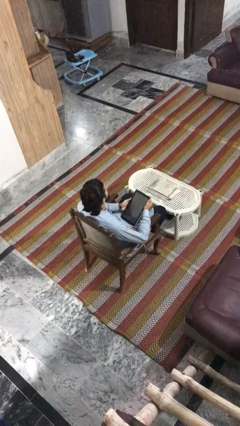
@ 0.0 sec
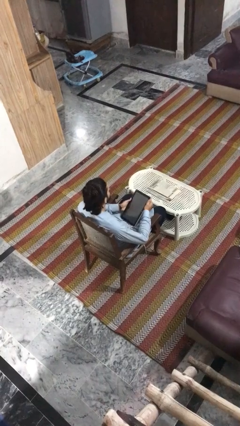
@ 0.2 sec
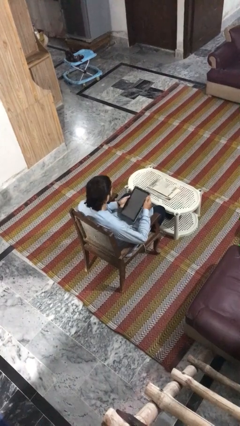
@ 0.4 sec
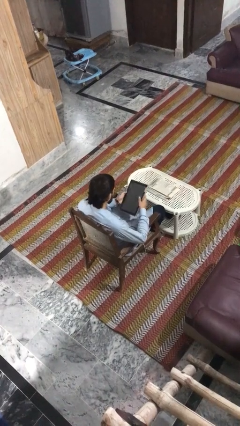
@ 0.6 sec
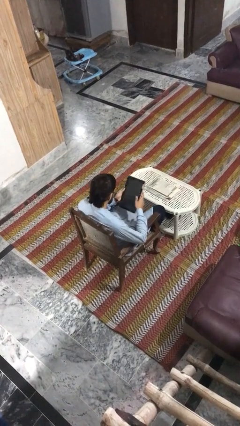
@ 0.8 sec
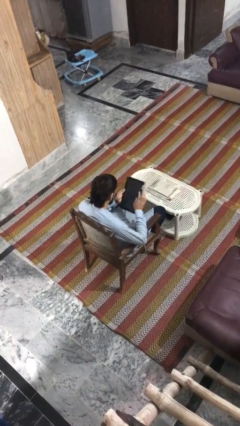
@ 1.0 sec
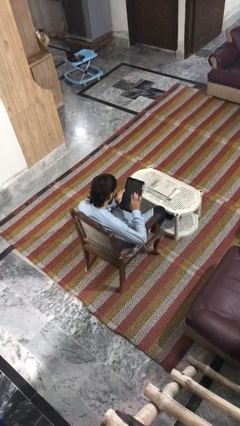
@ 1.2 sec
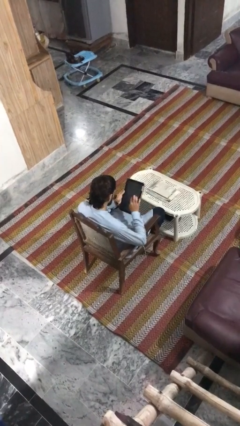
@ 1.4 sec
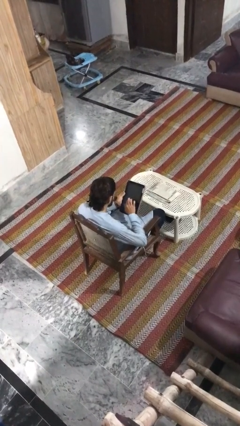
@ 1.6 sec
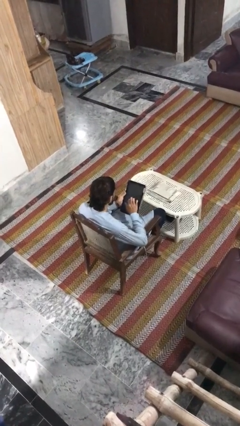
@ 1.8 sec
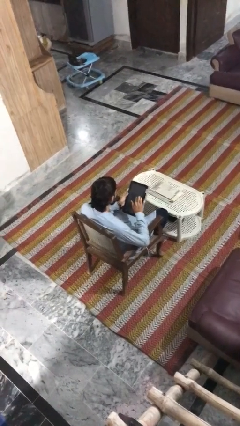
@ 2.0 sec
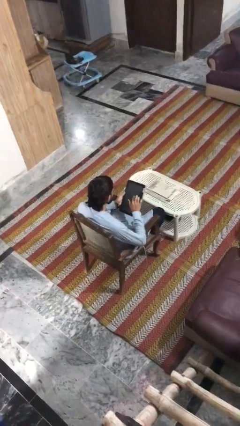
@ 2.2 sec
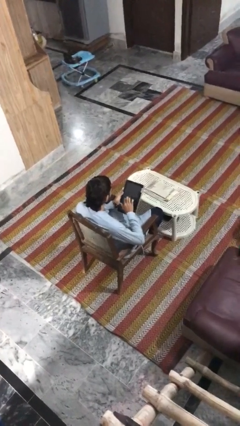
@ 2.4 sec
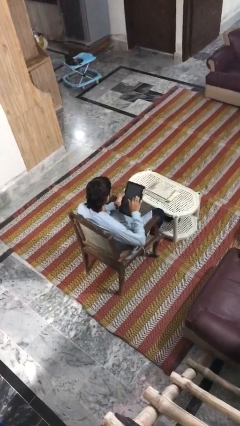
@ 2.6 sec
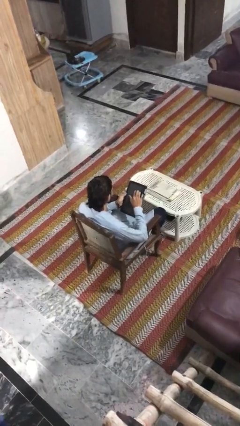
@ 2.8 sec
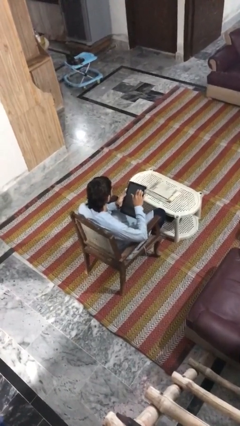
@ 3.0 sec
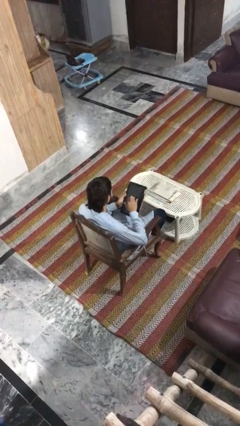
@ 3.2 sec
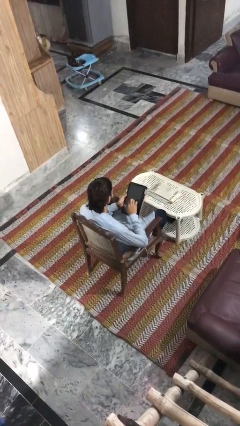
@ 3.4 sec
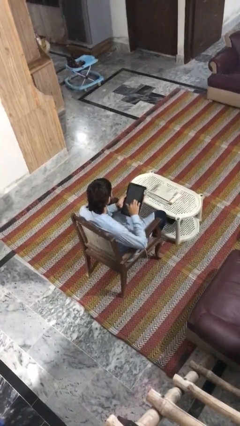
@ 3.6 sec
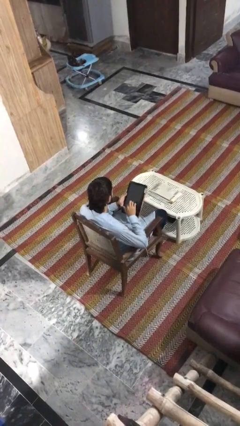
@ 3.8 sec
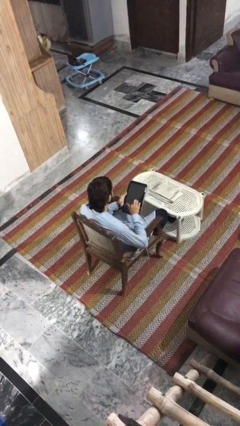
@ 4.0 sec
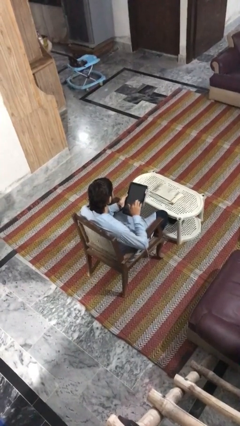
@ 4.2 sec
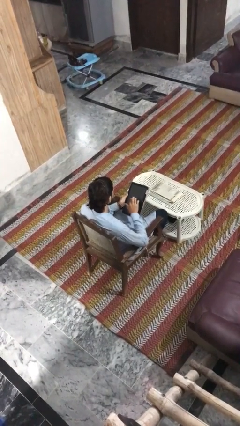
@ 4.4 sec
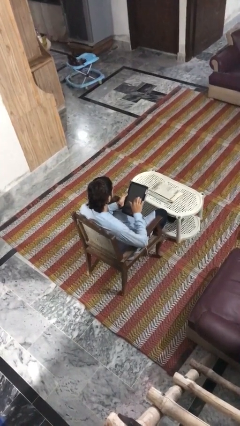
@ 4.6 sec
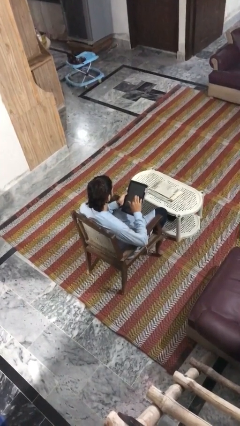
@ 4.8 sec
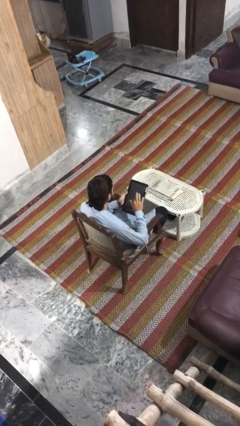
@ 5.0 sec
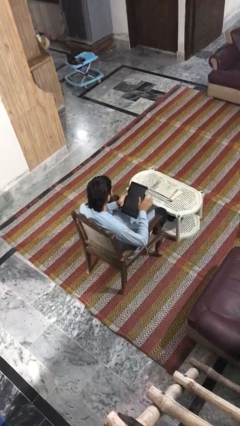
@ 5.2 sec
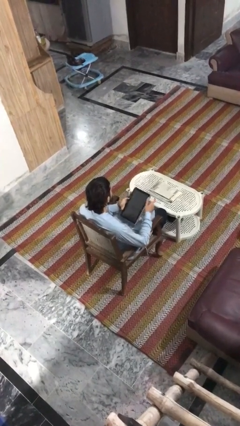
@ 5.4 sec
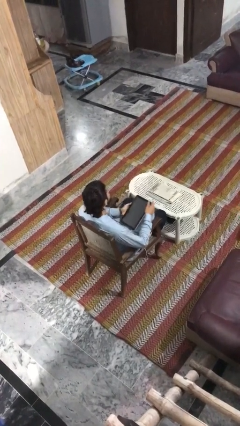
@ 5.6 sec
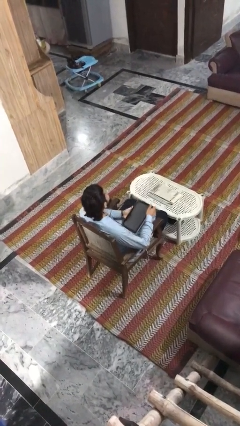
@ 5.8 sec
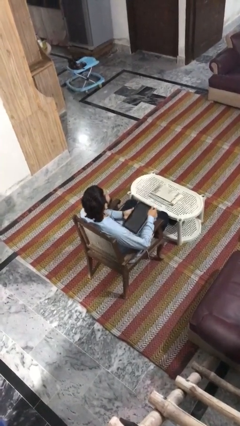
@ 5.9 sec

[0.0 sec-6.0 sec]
person interacts with tablet

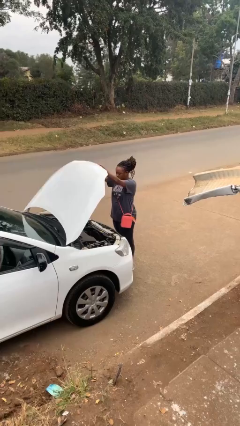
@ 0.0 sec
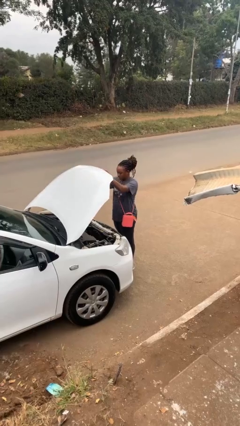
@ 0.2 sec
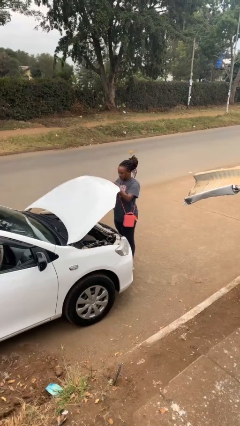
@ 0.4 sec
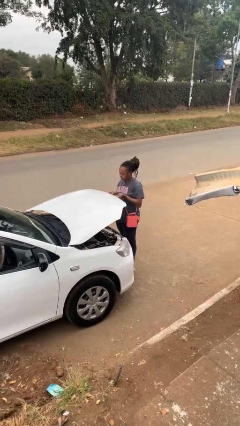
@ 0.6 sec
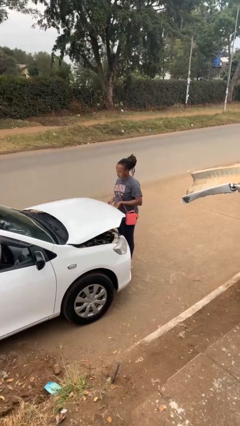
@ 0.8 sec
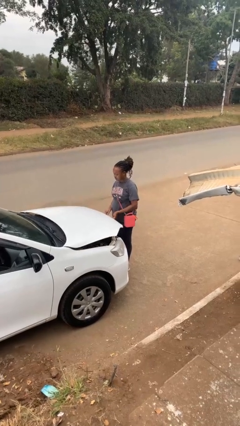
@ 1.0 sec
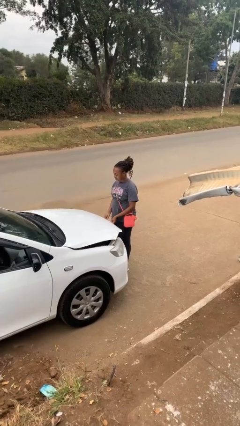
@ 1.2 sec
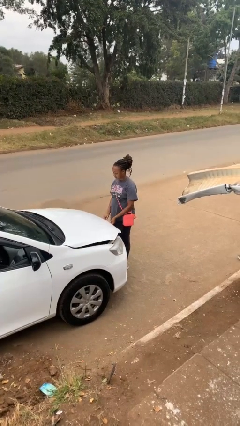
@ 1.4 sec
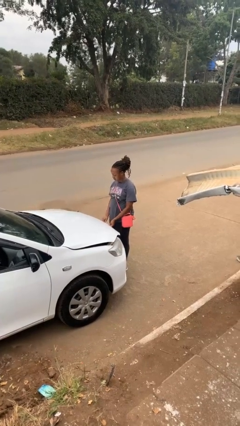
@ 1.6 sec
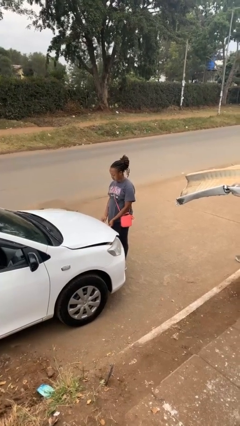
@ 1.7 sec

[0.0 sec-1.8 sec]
person closes car hood

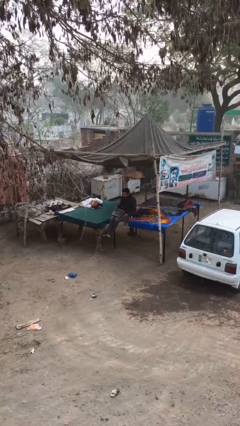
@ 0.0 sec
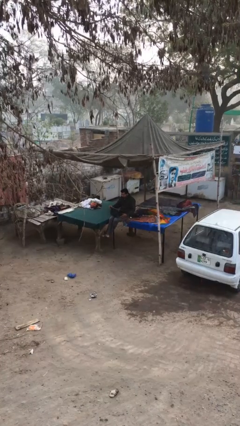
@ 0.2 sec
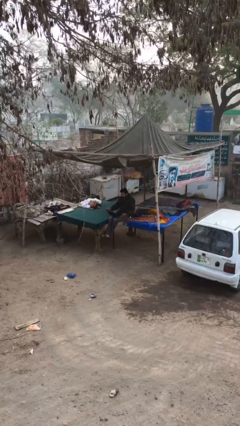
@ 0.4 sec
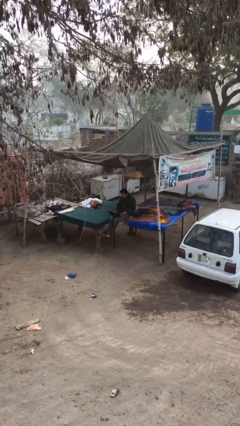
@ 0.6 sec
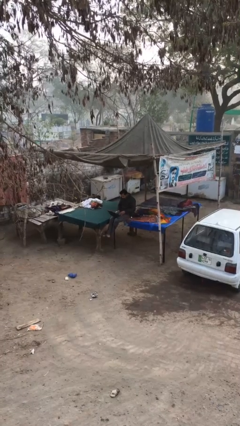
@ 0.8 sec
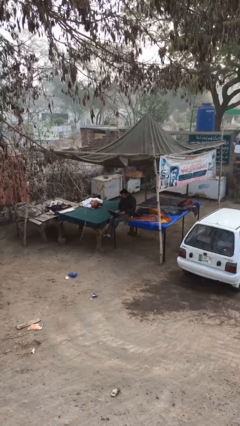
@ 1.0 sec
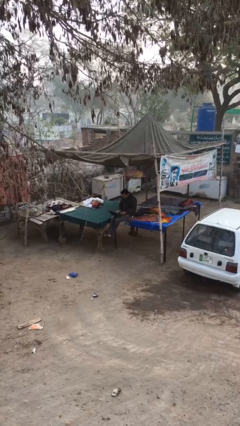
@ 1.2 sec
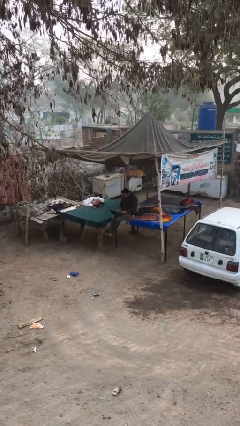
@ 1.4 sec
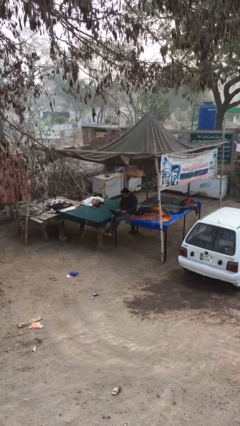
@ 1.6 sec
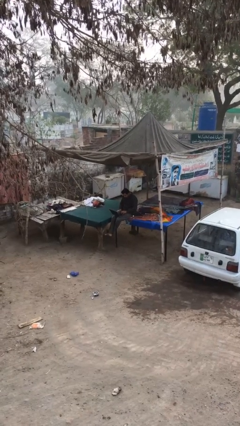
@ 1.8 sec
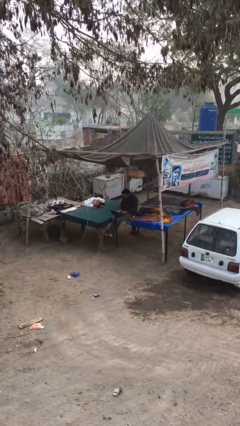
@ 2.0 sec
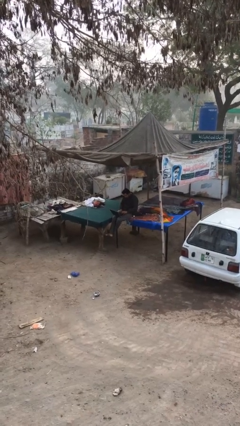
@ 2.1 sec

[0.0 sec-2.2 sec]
person interacts with laptop

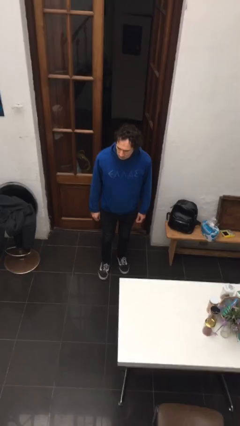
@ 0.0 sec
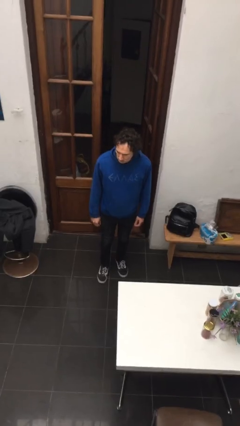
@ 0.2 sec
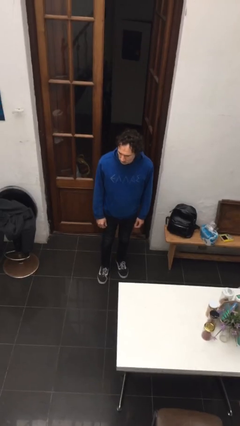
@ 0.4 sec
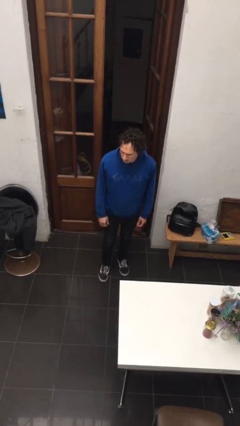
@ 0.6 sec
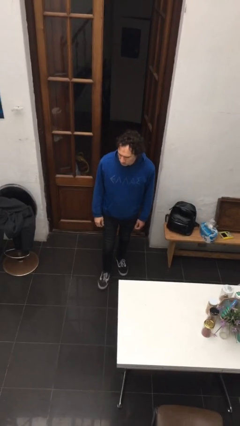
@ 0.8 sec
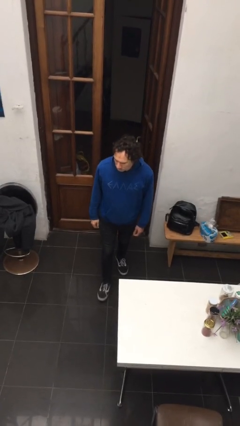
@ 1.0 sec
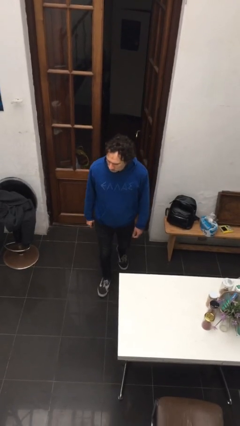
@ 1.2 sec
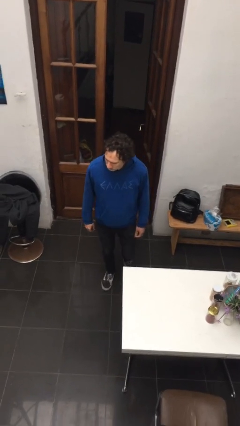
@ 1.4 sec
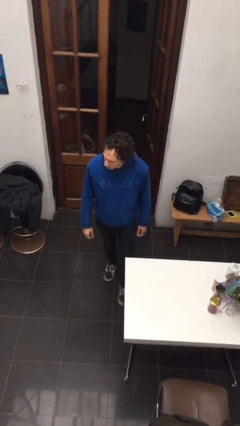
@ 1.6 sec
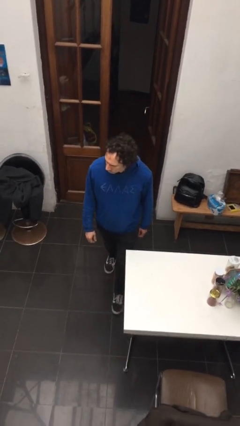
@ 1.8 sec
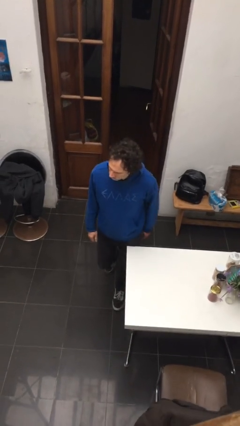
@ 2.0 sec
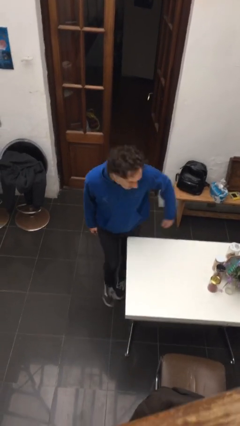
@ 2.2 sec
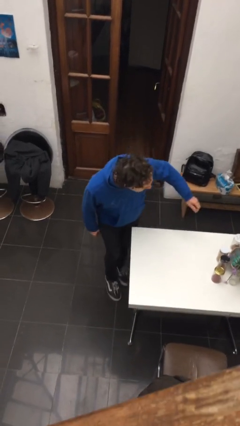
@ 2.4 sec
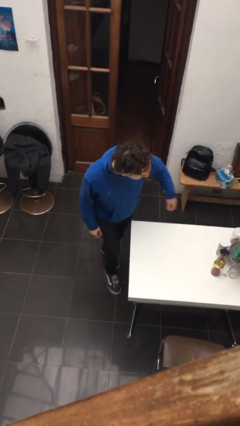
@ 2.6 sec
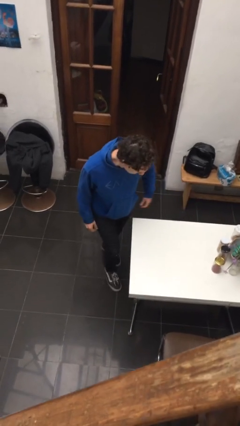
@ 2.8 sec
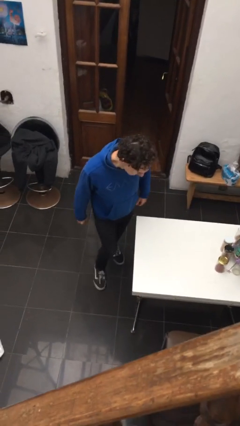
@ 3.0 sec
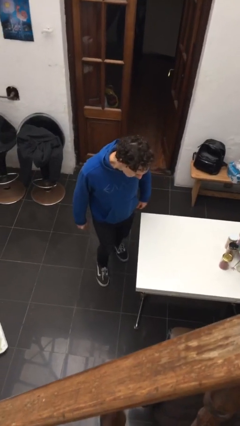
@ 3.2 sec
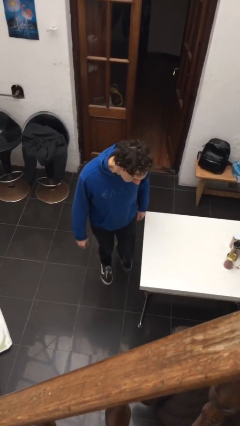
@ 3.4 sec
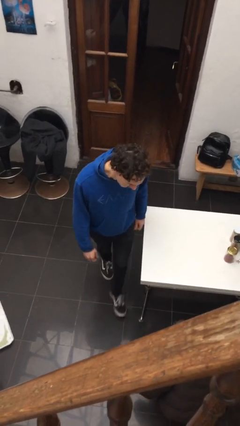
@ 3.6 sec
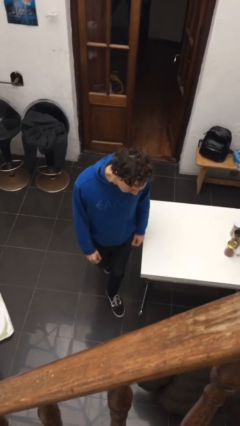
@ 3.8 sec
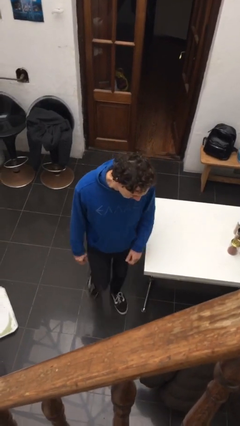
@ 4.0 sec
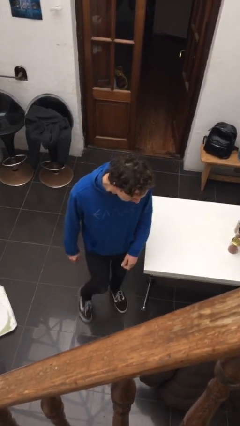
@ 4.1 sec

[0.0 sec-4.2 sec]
person bumps into table

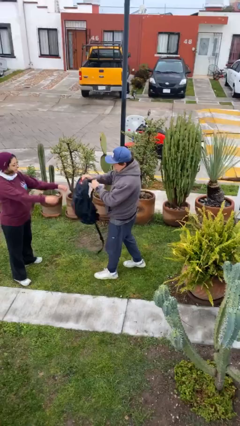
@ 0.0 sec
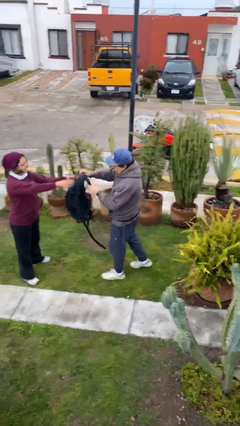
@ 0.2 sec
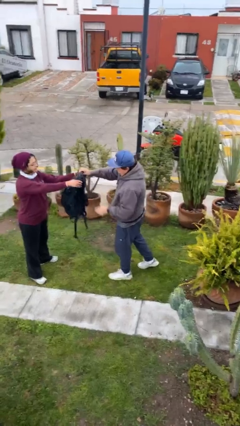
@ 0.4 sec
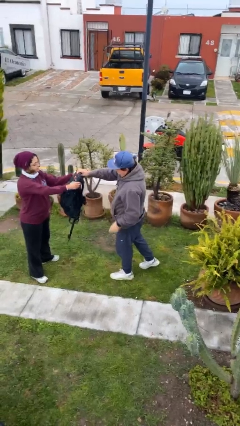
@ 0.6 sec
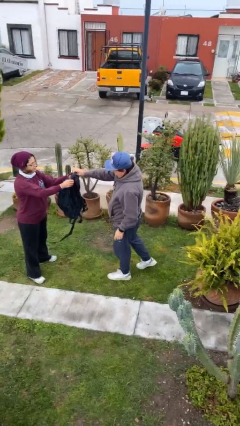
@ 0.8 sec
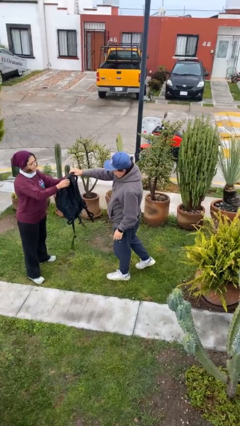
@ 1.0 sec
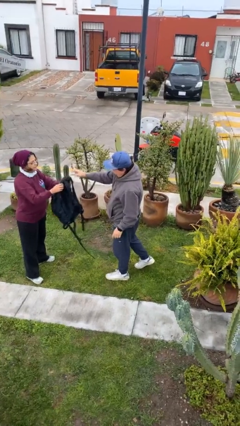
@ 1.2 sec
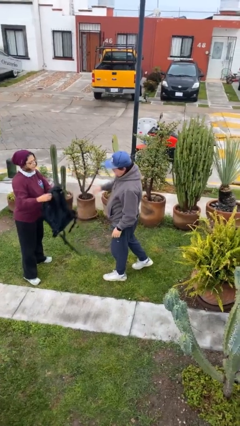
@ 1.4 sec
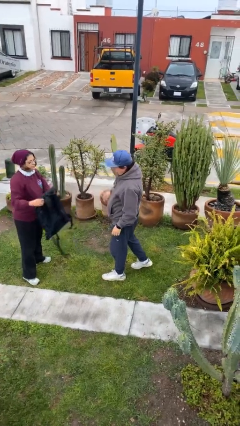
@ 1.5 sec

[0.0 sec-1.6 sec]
person transfers object to person

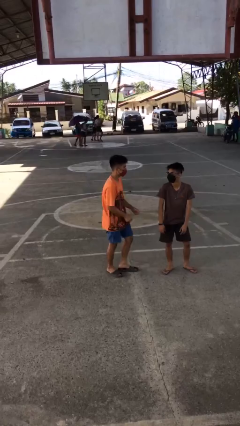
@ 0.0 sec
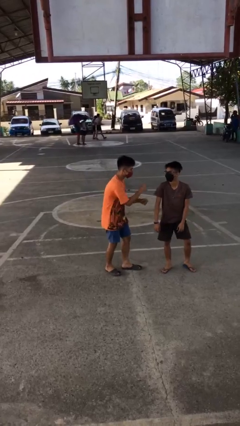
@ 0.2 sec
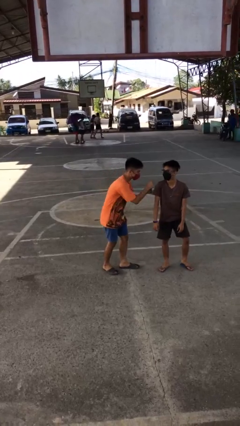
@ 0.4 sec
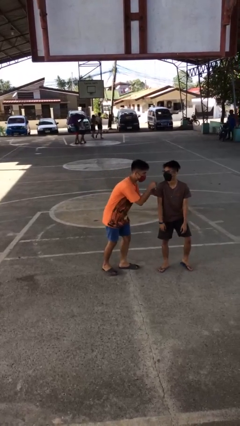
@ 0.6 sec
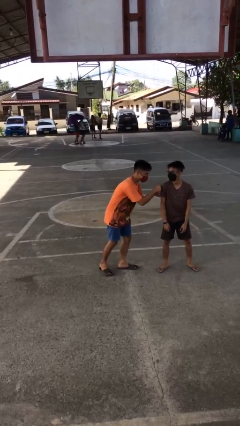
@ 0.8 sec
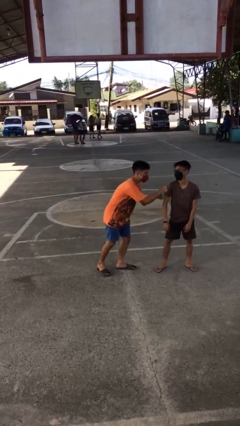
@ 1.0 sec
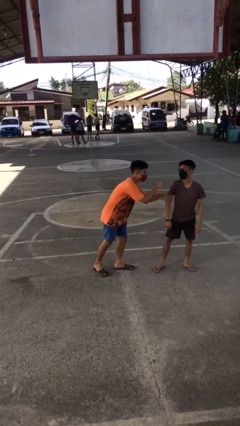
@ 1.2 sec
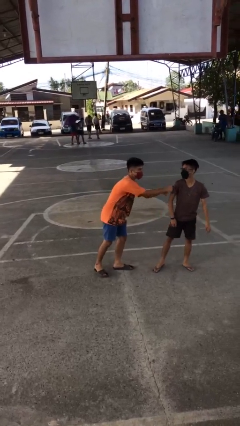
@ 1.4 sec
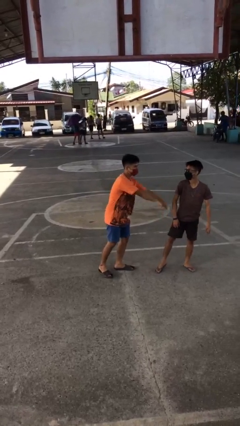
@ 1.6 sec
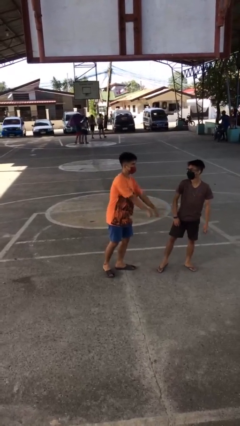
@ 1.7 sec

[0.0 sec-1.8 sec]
person pounds shoulders of person
